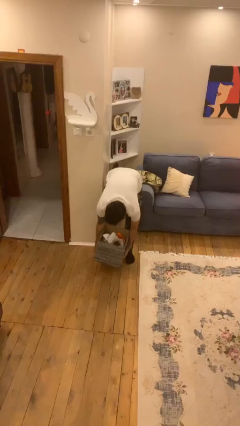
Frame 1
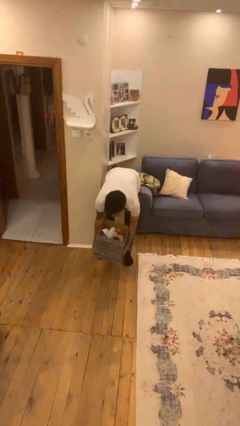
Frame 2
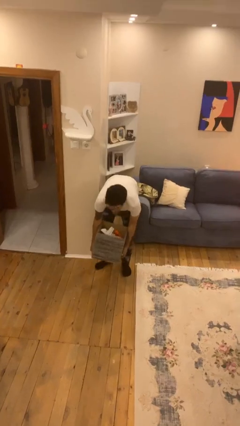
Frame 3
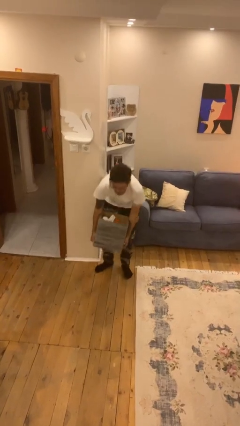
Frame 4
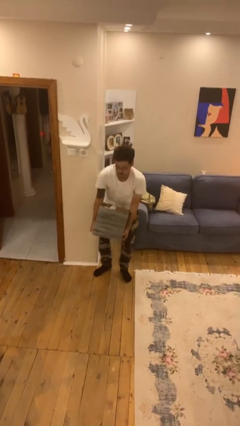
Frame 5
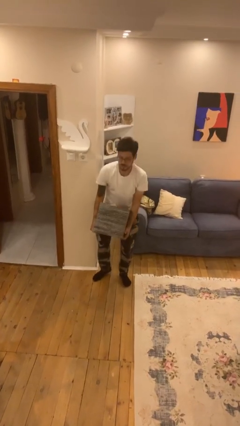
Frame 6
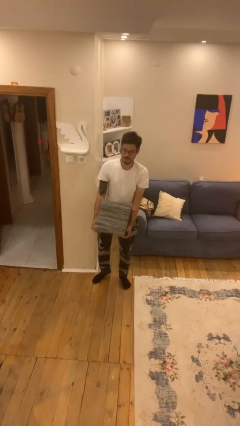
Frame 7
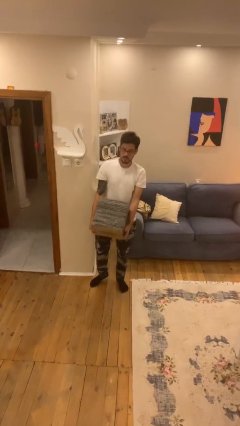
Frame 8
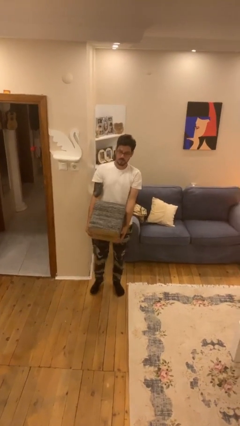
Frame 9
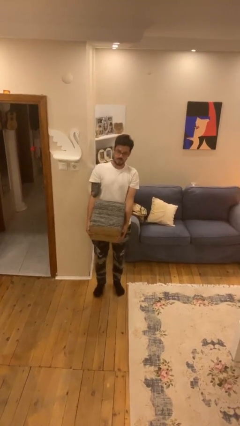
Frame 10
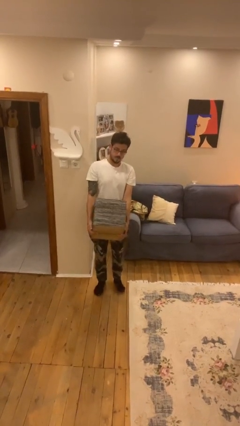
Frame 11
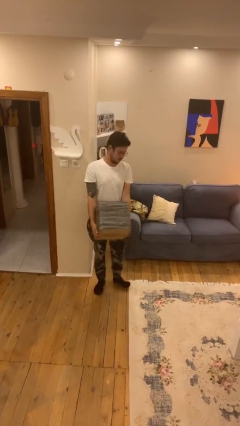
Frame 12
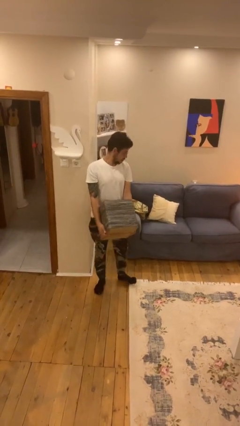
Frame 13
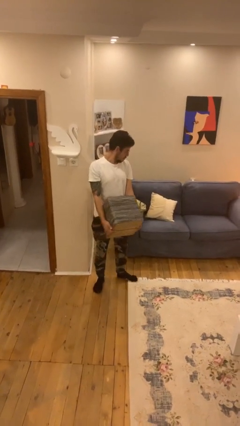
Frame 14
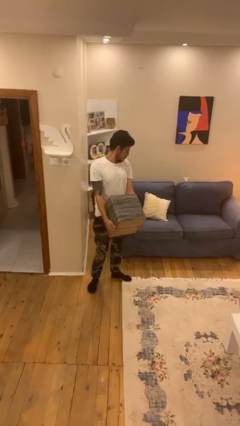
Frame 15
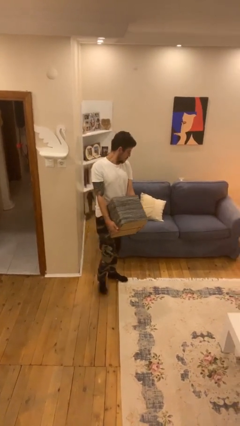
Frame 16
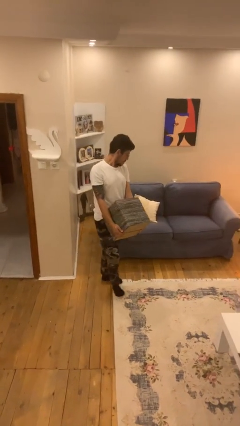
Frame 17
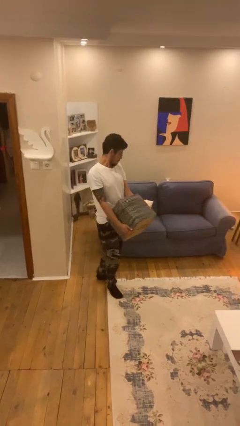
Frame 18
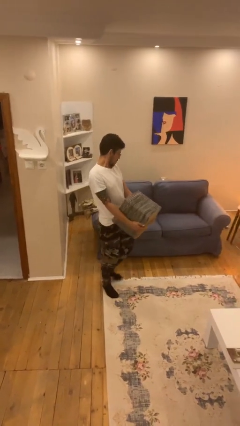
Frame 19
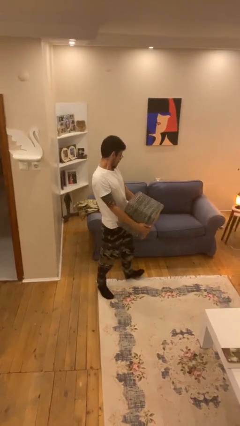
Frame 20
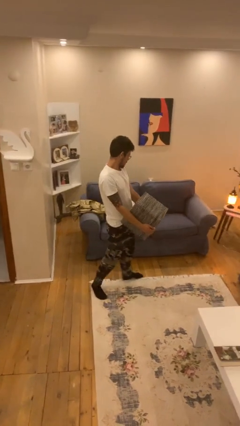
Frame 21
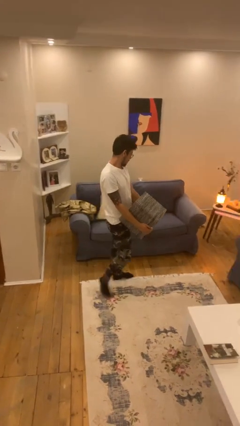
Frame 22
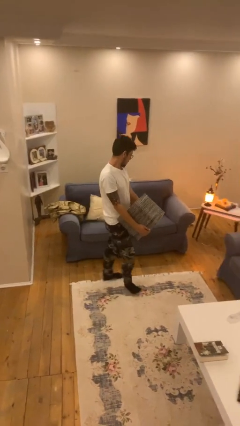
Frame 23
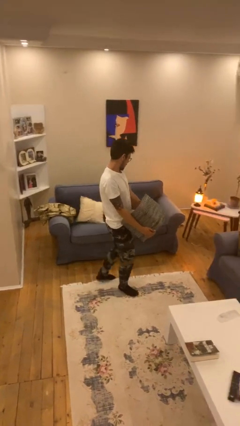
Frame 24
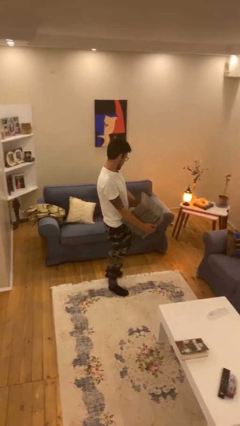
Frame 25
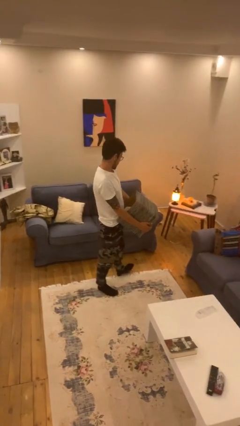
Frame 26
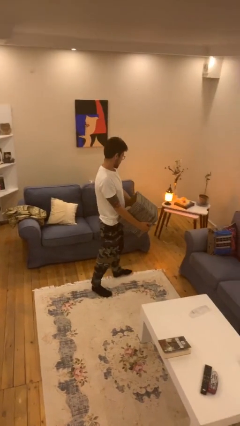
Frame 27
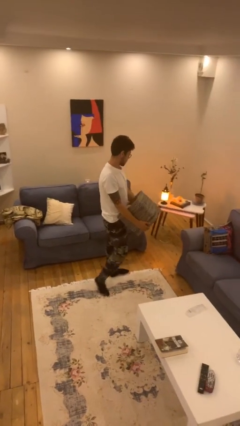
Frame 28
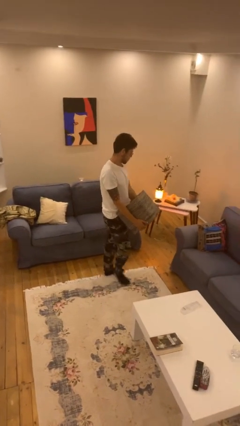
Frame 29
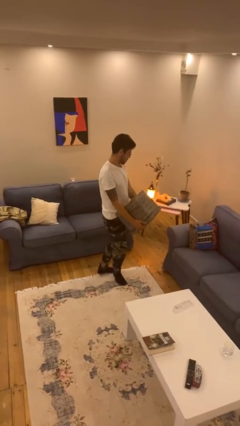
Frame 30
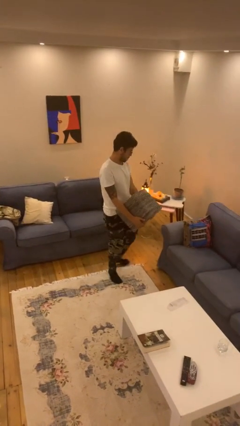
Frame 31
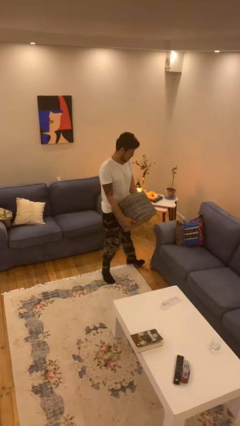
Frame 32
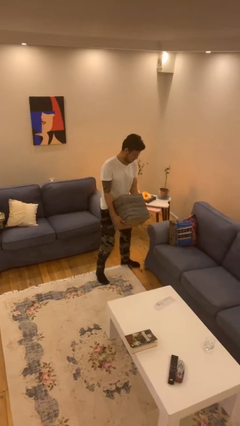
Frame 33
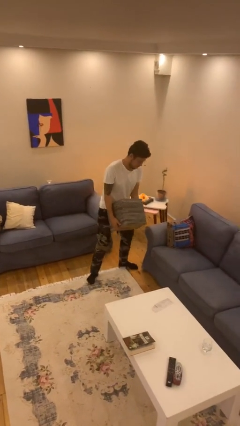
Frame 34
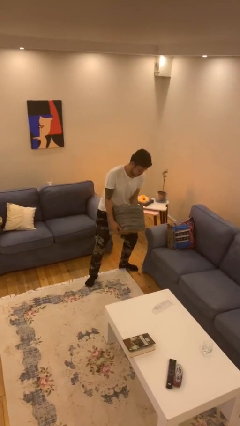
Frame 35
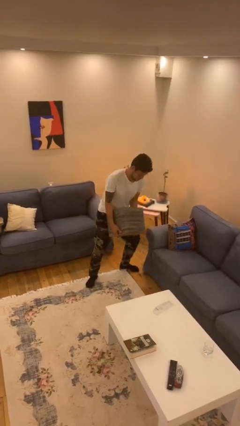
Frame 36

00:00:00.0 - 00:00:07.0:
person carries heavy object

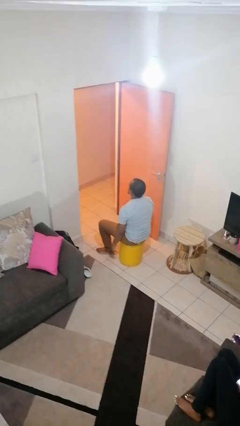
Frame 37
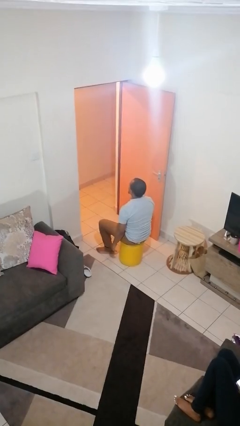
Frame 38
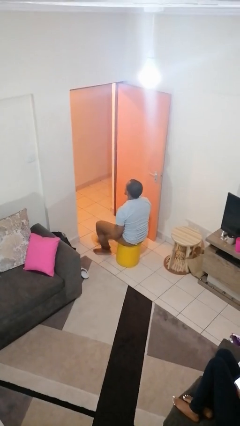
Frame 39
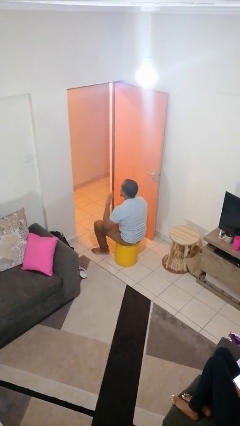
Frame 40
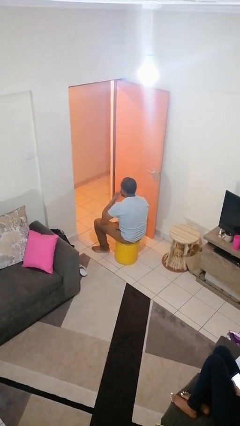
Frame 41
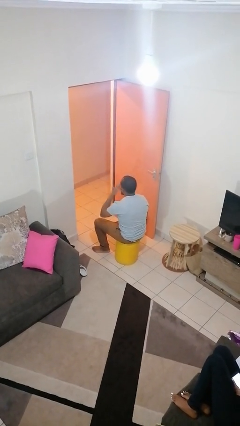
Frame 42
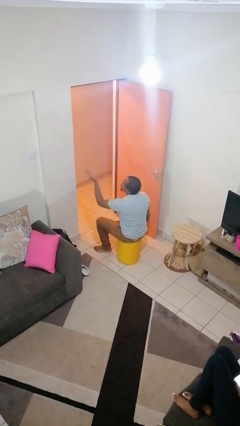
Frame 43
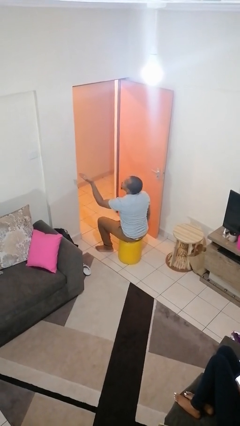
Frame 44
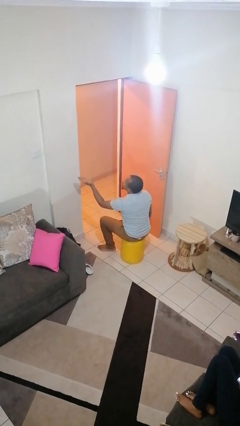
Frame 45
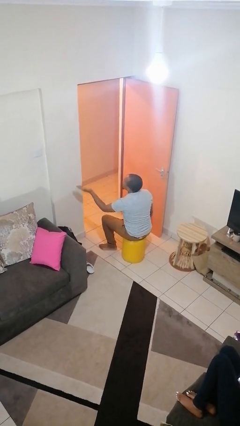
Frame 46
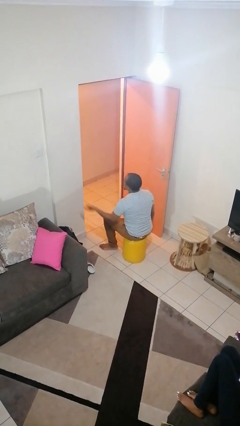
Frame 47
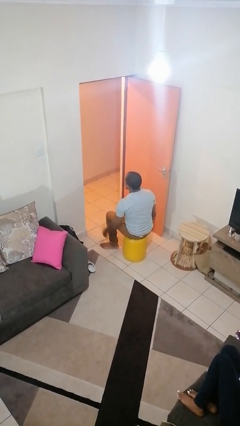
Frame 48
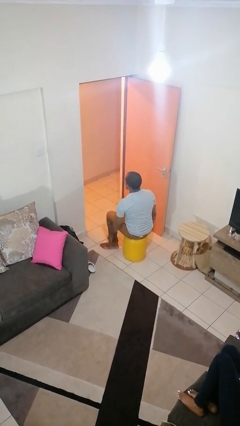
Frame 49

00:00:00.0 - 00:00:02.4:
person gestures blow kiss

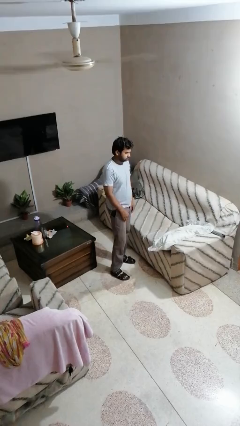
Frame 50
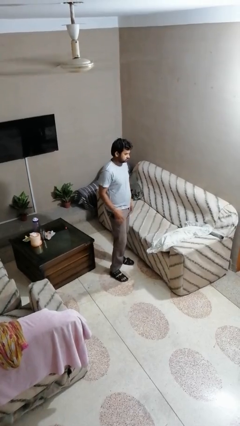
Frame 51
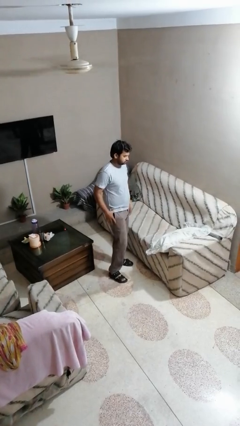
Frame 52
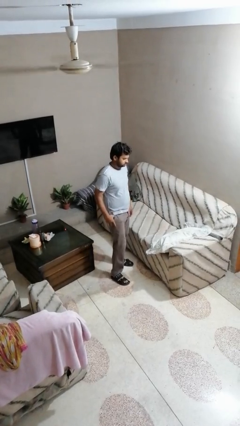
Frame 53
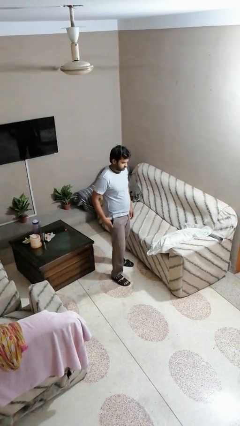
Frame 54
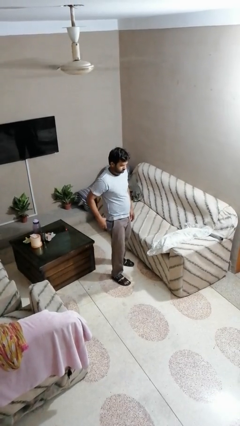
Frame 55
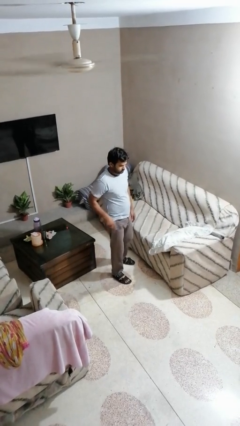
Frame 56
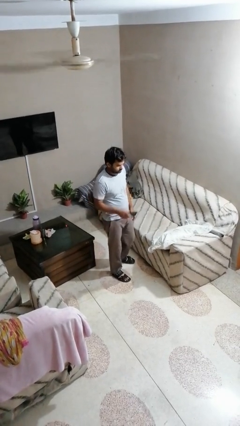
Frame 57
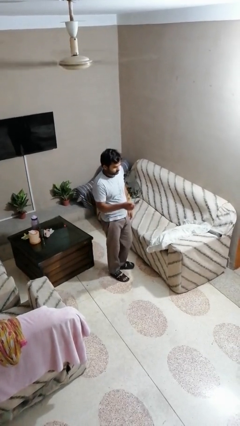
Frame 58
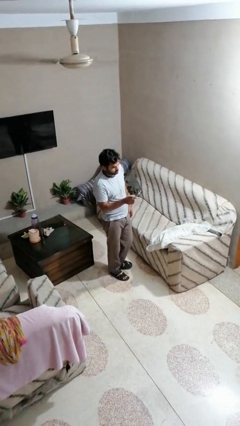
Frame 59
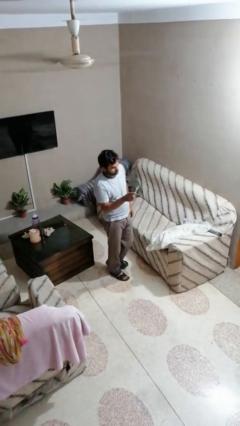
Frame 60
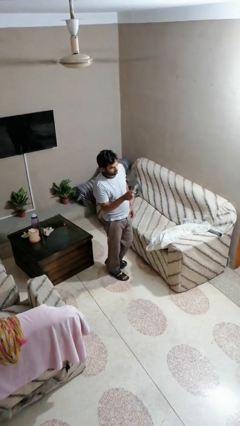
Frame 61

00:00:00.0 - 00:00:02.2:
person takes phone from pocket

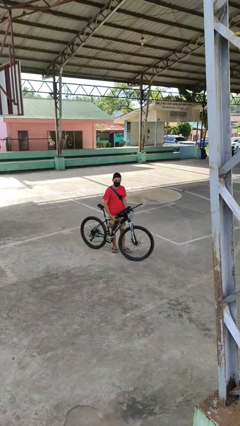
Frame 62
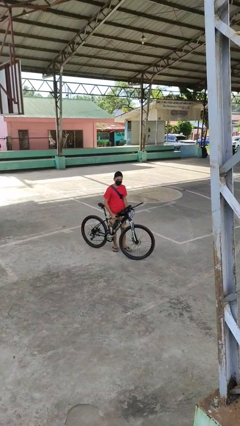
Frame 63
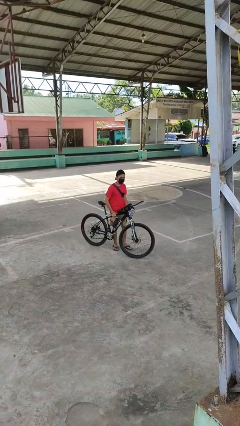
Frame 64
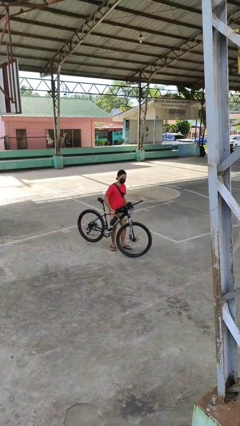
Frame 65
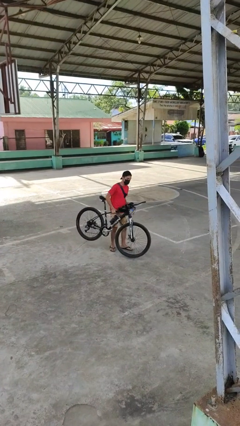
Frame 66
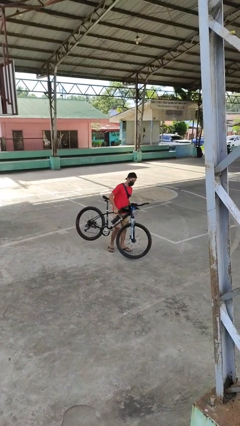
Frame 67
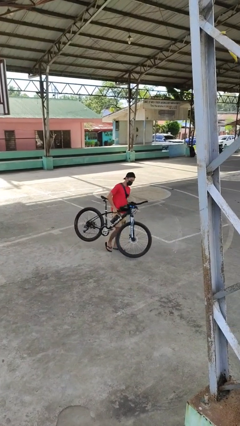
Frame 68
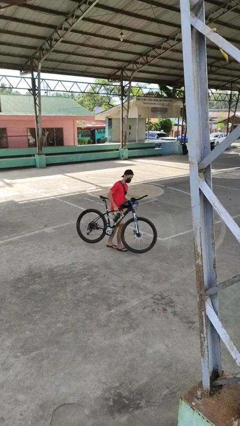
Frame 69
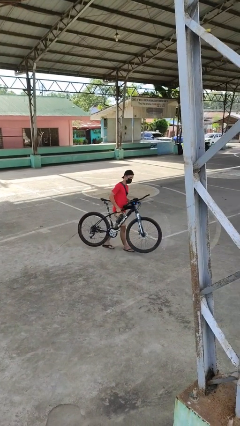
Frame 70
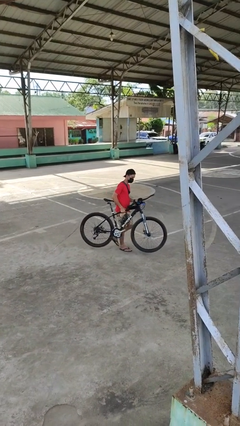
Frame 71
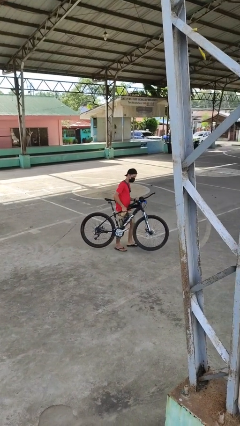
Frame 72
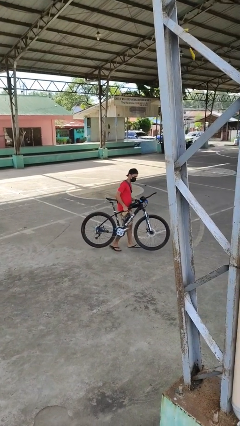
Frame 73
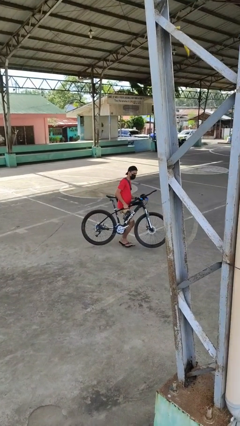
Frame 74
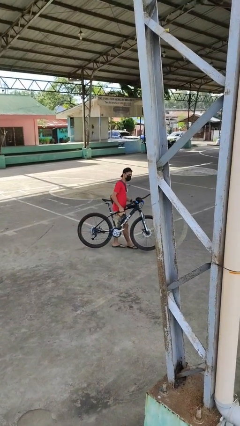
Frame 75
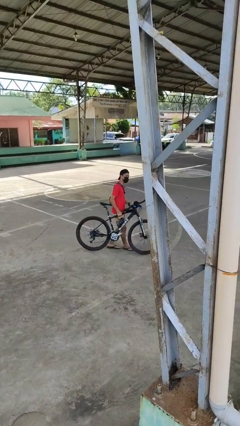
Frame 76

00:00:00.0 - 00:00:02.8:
person carries bicycle

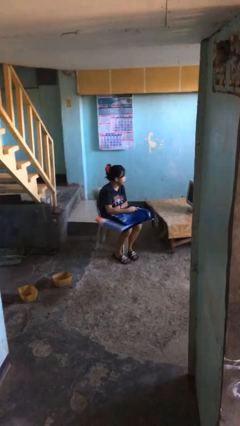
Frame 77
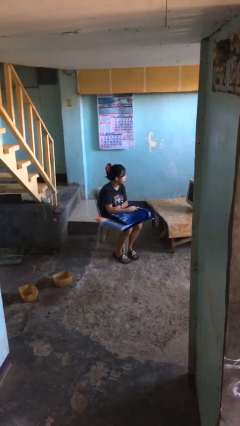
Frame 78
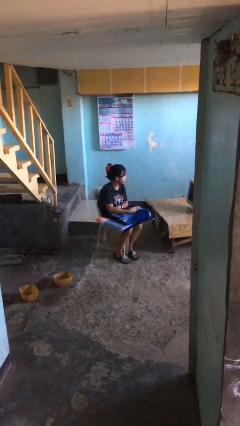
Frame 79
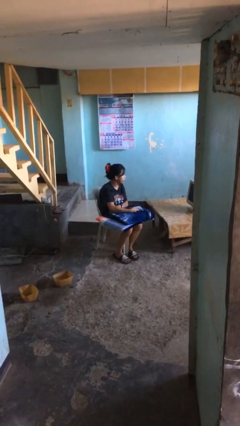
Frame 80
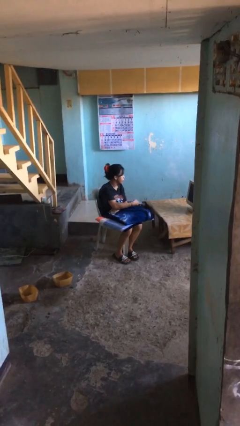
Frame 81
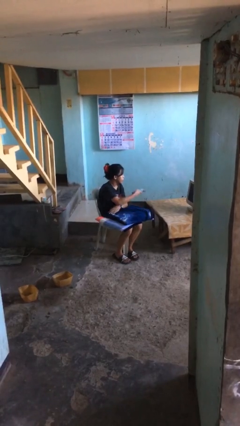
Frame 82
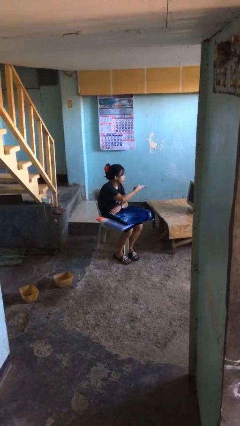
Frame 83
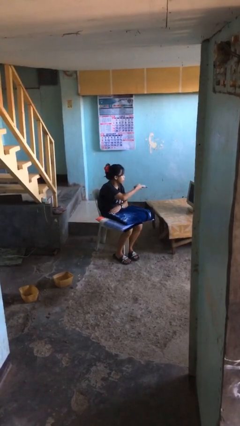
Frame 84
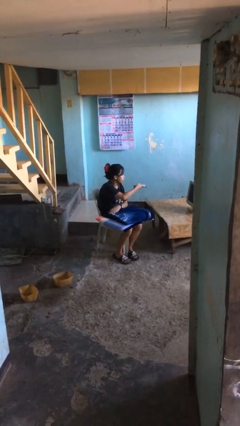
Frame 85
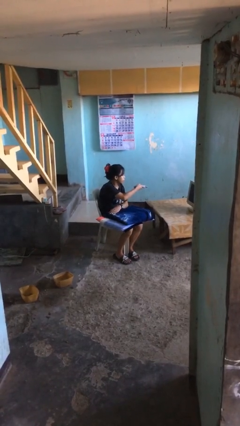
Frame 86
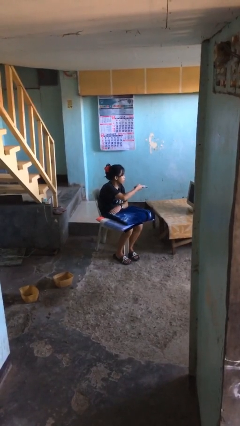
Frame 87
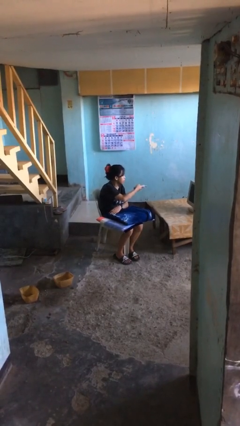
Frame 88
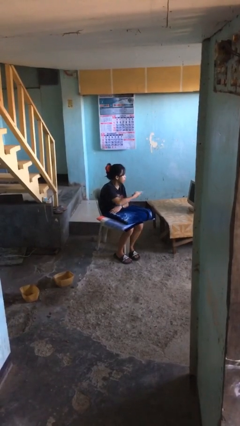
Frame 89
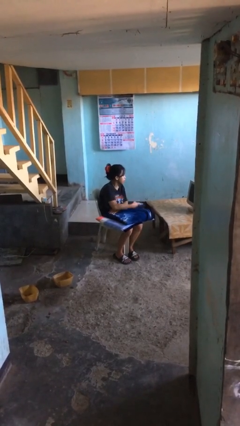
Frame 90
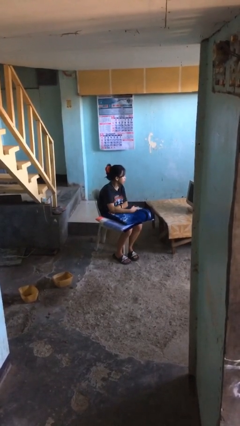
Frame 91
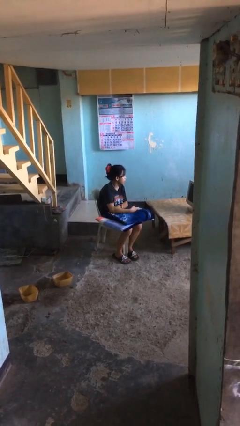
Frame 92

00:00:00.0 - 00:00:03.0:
person uses television remote

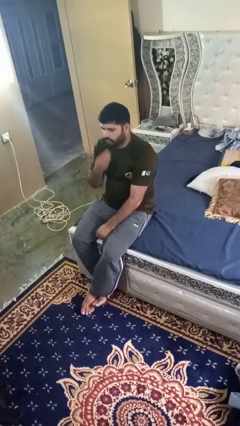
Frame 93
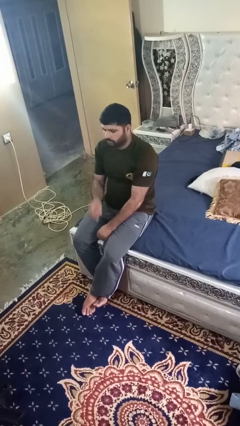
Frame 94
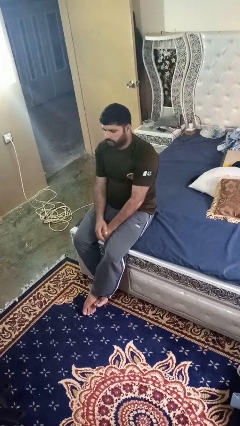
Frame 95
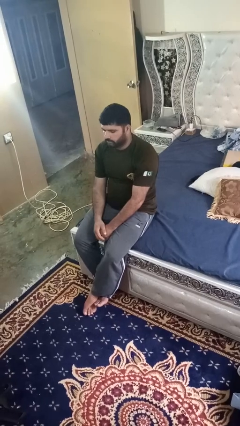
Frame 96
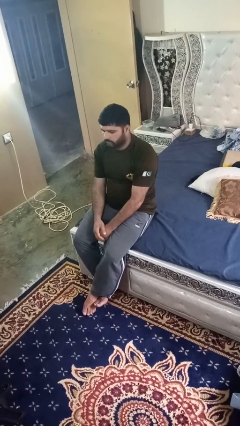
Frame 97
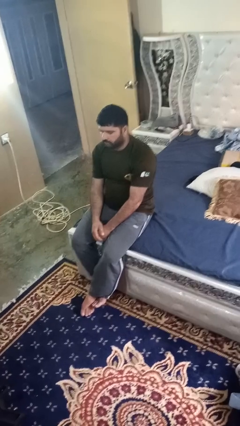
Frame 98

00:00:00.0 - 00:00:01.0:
person strokes chin
